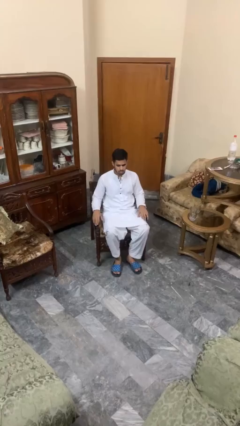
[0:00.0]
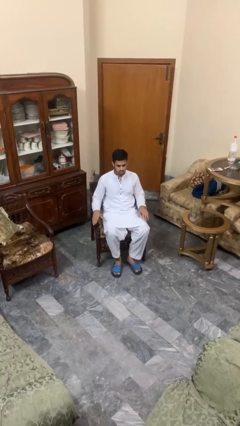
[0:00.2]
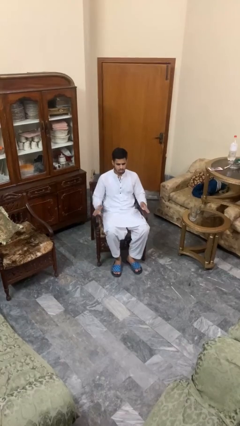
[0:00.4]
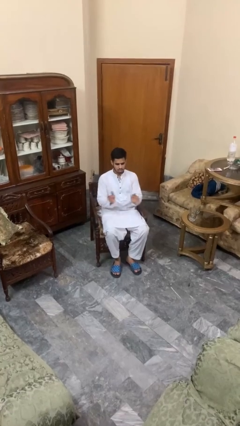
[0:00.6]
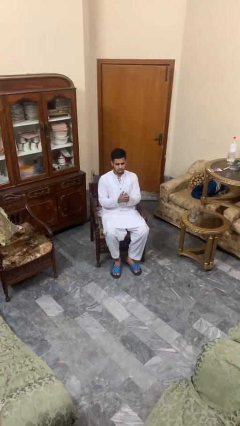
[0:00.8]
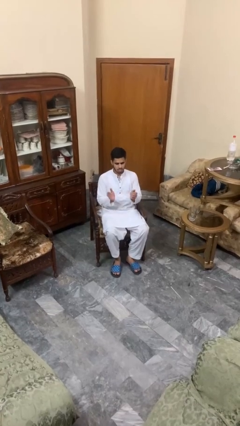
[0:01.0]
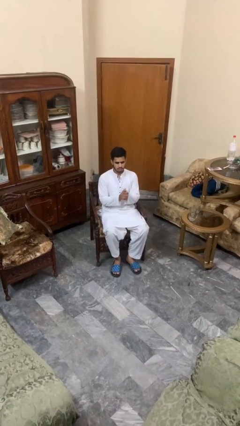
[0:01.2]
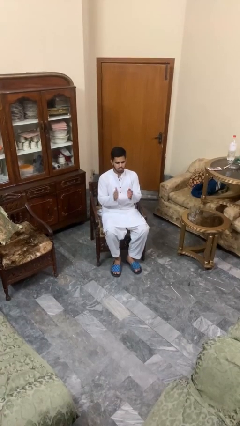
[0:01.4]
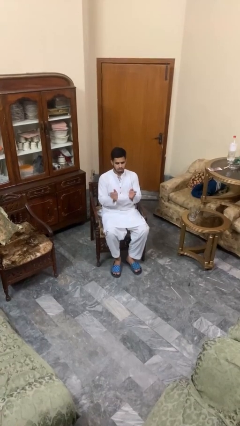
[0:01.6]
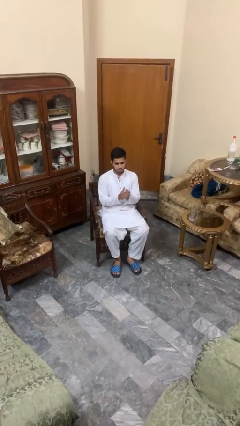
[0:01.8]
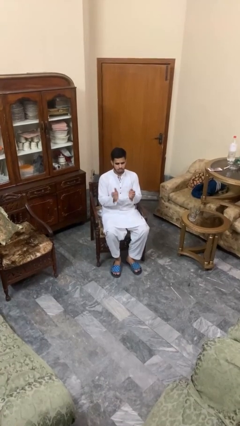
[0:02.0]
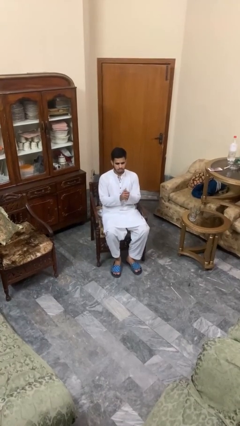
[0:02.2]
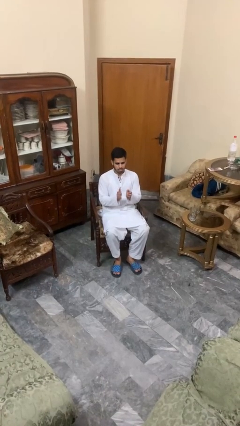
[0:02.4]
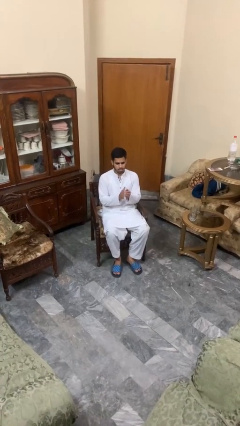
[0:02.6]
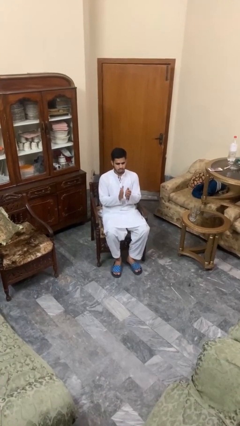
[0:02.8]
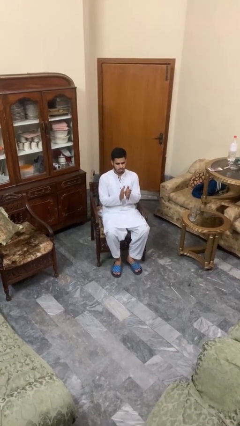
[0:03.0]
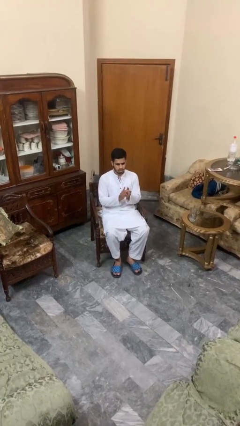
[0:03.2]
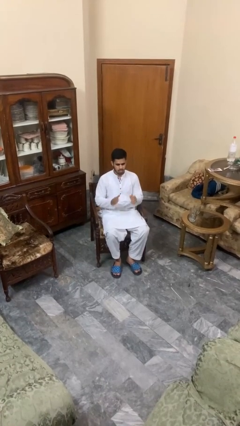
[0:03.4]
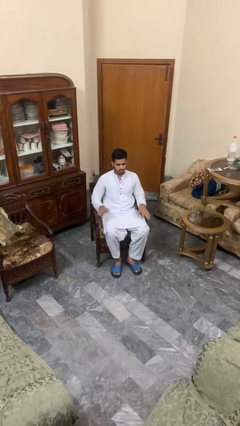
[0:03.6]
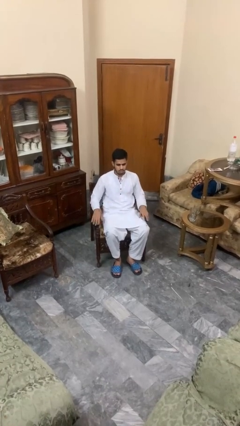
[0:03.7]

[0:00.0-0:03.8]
person claps hands

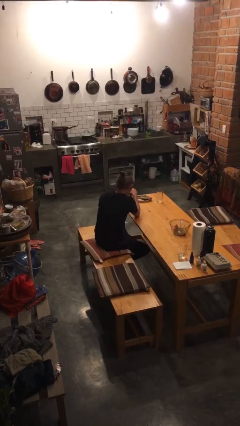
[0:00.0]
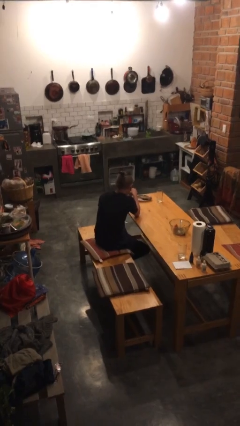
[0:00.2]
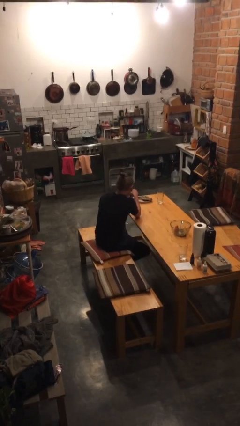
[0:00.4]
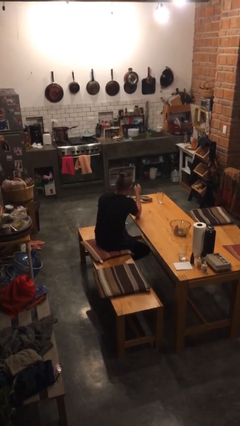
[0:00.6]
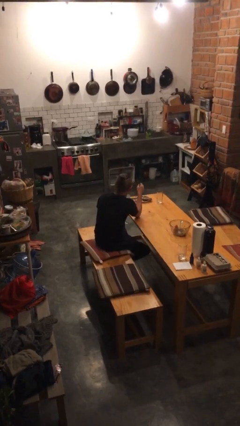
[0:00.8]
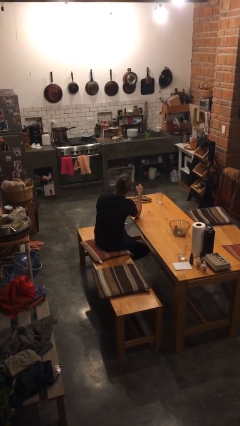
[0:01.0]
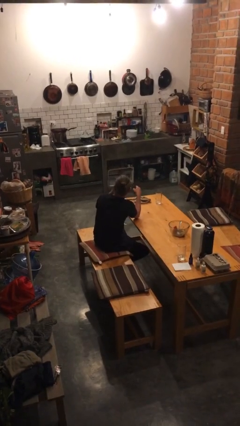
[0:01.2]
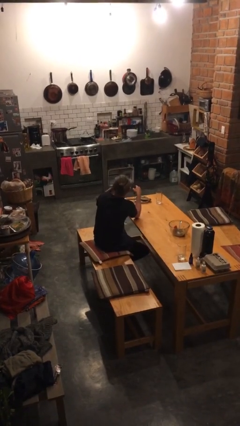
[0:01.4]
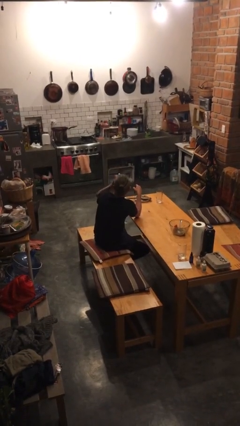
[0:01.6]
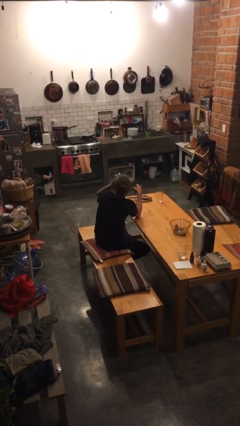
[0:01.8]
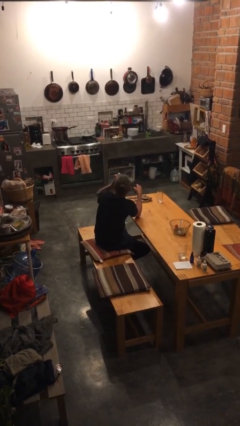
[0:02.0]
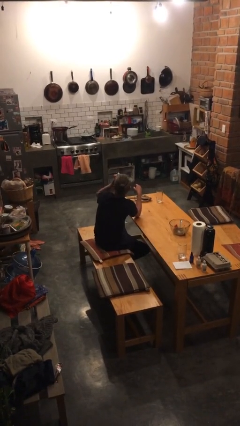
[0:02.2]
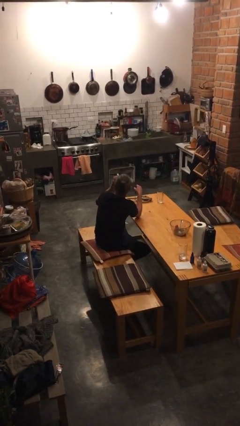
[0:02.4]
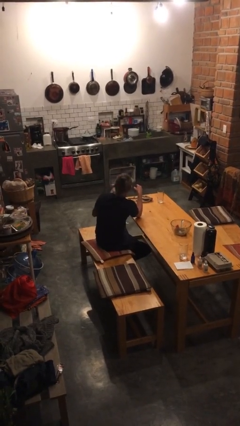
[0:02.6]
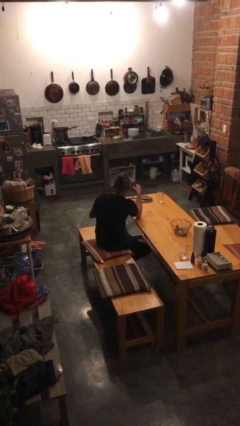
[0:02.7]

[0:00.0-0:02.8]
person drinks from mug

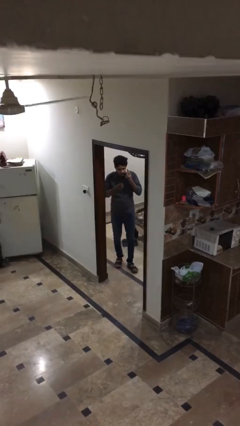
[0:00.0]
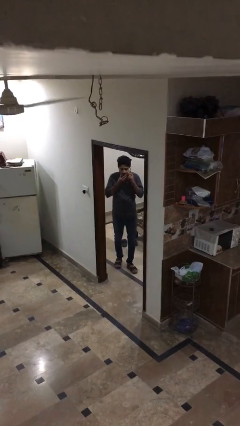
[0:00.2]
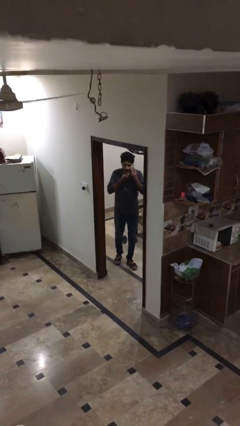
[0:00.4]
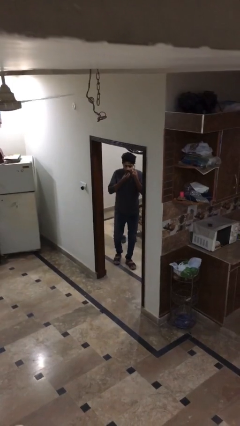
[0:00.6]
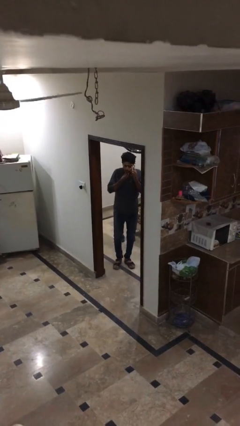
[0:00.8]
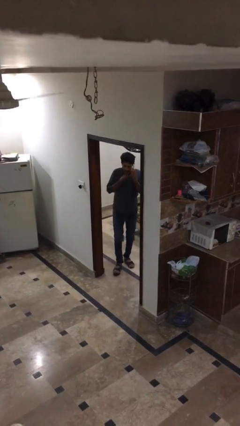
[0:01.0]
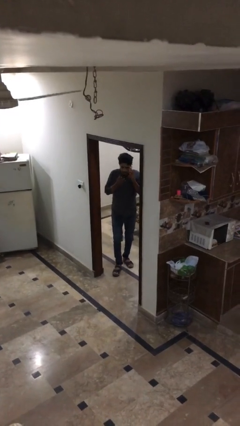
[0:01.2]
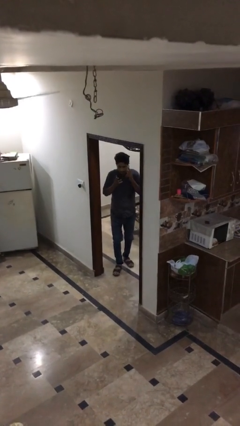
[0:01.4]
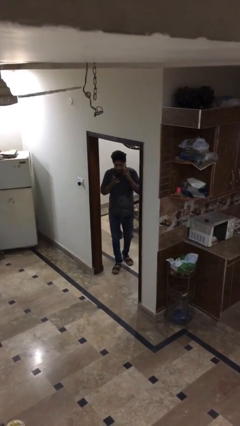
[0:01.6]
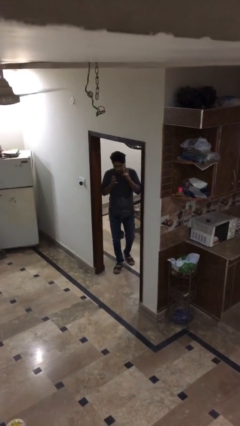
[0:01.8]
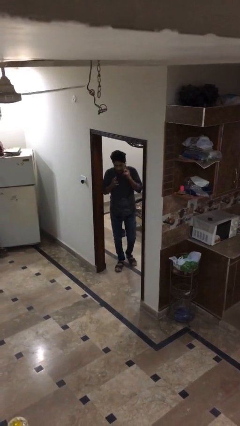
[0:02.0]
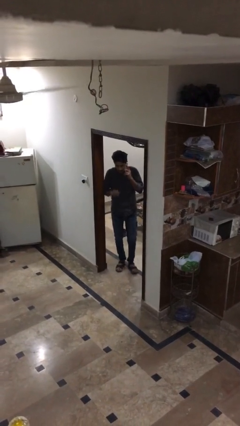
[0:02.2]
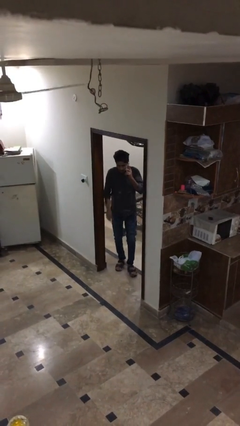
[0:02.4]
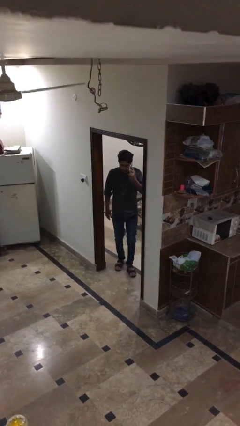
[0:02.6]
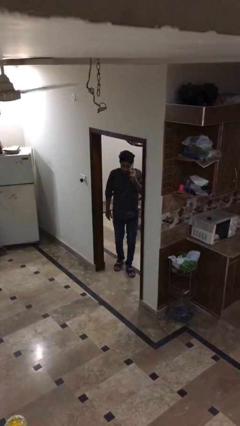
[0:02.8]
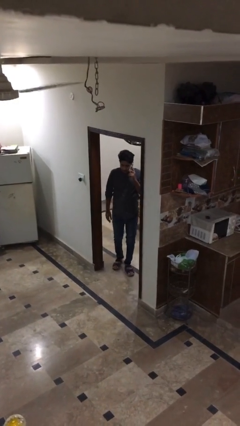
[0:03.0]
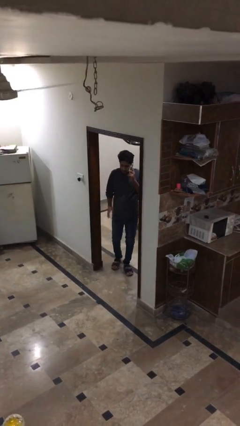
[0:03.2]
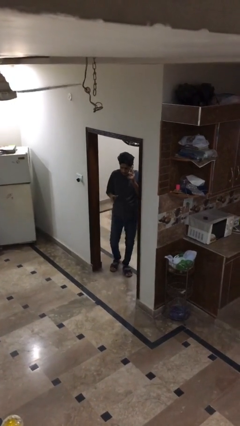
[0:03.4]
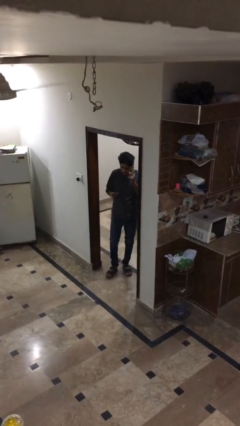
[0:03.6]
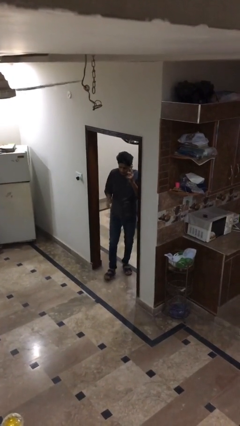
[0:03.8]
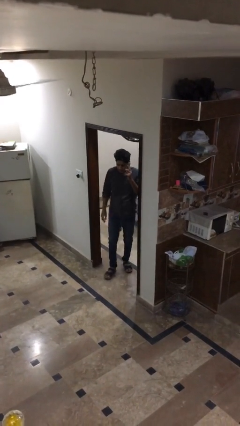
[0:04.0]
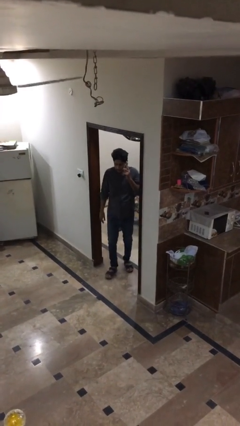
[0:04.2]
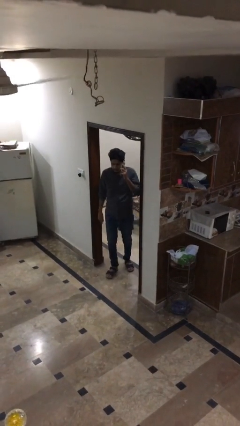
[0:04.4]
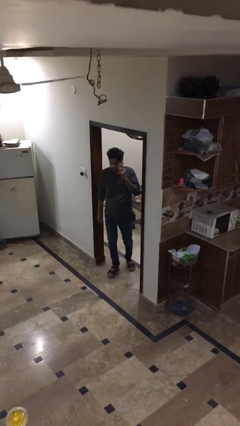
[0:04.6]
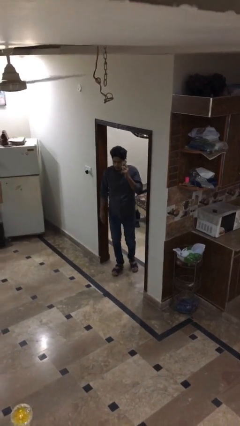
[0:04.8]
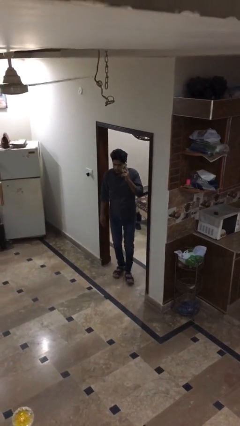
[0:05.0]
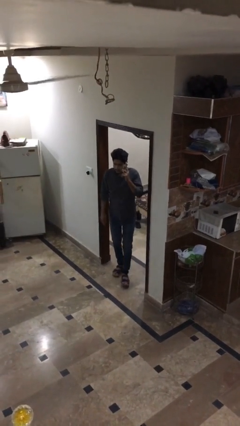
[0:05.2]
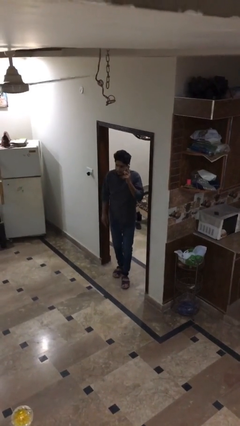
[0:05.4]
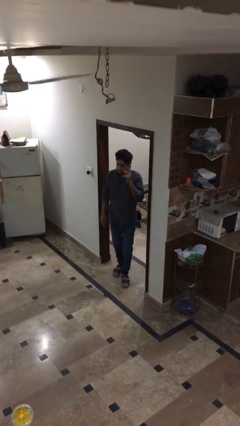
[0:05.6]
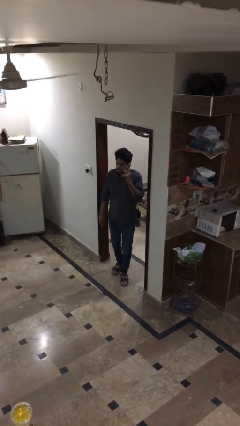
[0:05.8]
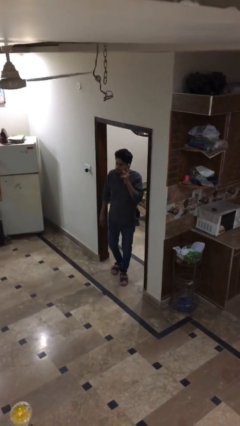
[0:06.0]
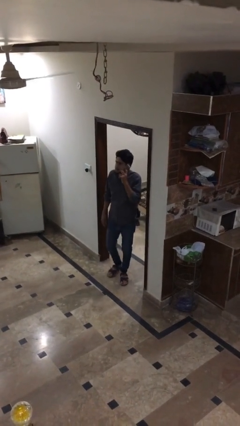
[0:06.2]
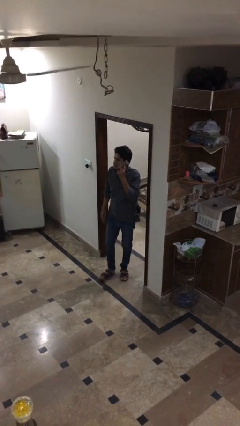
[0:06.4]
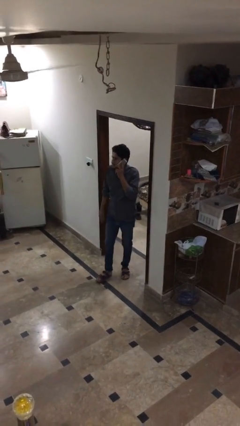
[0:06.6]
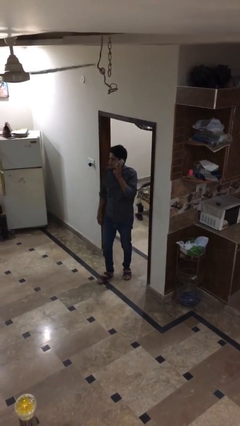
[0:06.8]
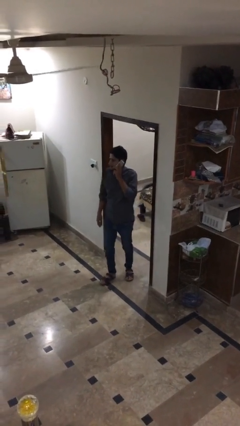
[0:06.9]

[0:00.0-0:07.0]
person enters scene through structure

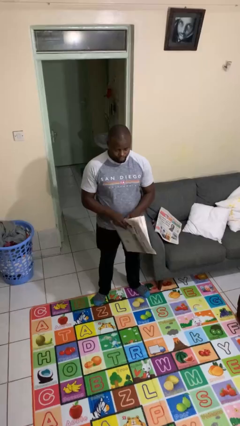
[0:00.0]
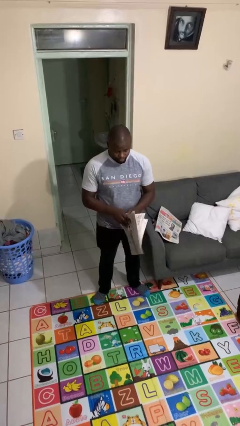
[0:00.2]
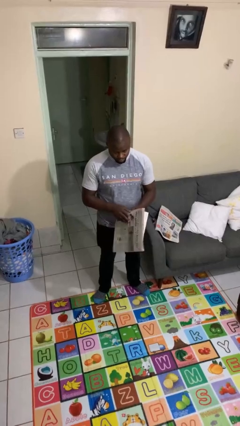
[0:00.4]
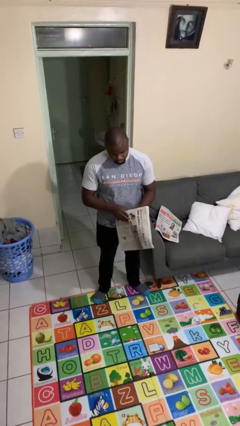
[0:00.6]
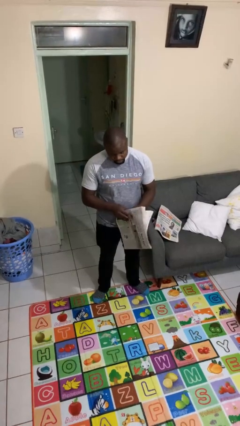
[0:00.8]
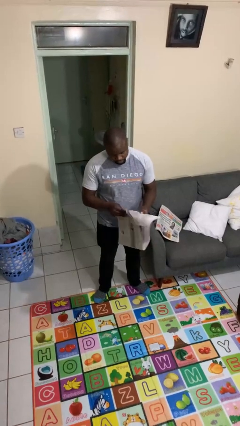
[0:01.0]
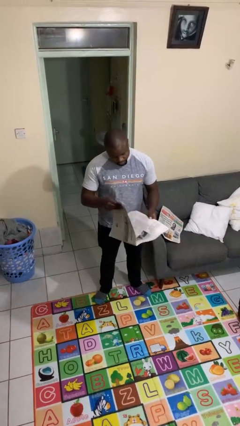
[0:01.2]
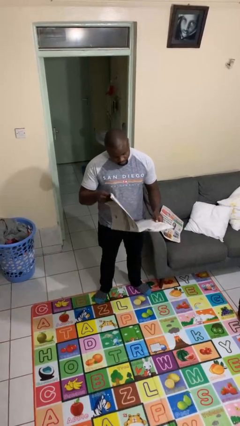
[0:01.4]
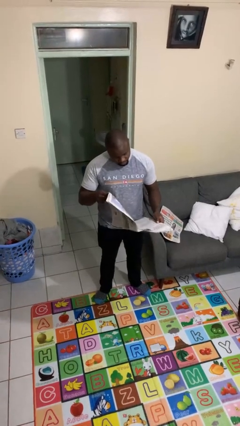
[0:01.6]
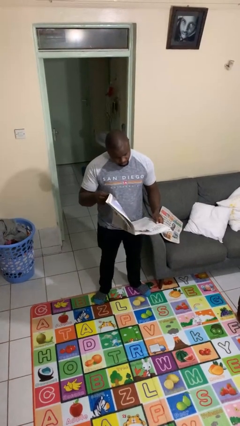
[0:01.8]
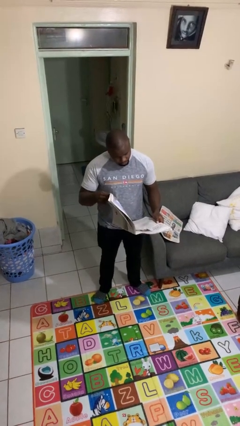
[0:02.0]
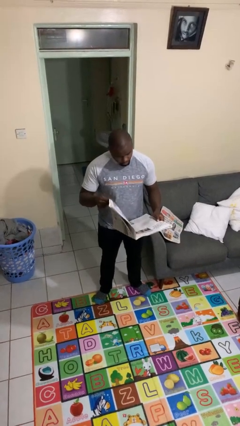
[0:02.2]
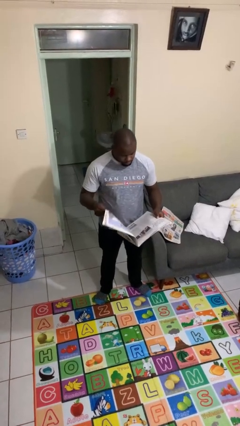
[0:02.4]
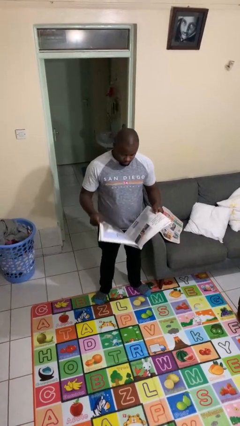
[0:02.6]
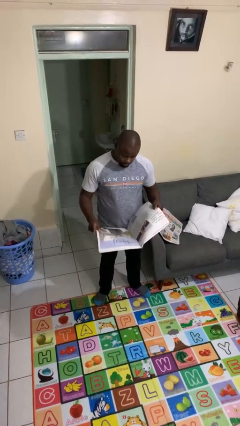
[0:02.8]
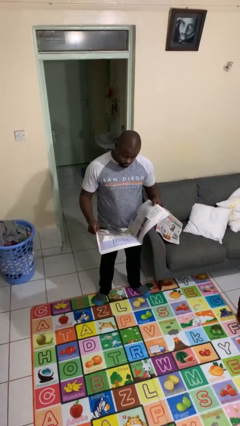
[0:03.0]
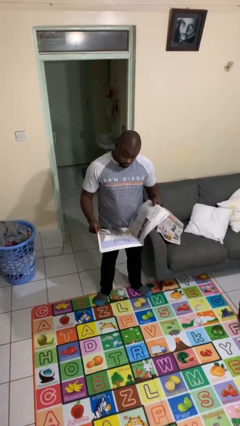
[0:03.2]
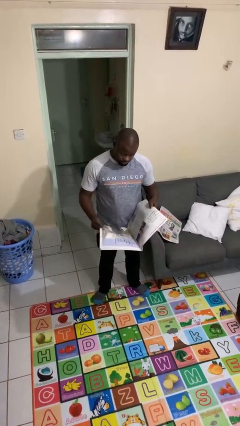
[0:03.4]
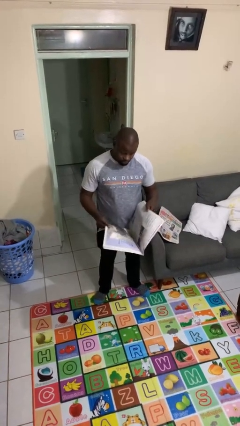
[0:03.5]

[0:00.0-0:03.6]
person reads newspaper

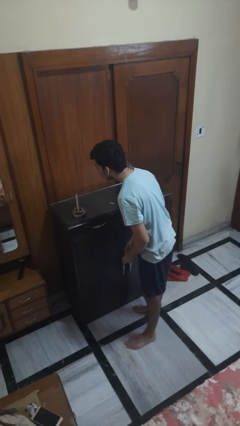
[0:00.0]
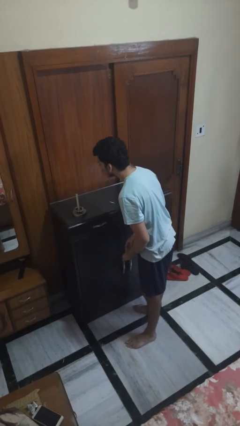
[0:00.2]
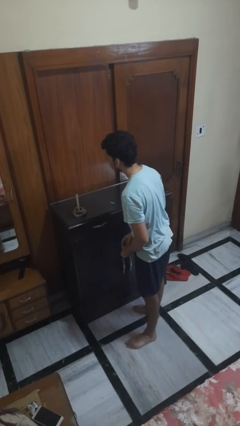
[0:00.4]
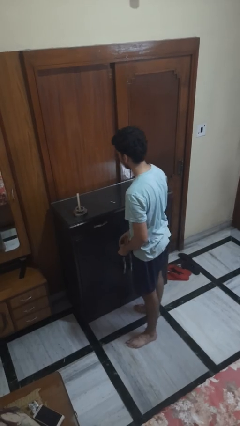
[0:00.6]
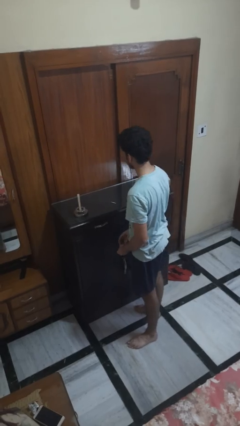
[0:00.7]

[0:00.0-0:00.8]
person extinguishes candle
